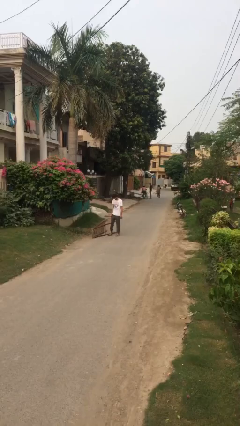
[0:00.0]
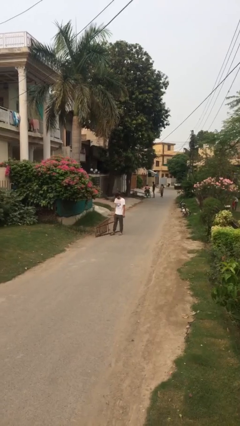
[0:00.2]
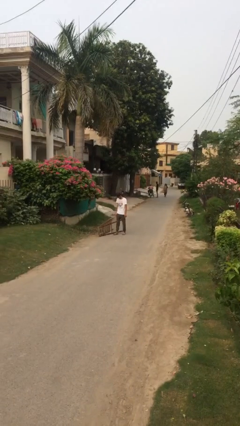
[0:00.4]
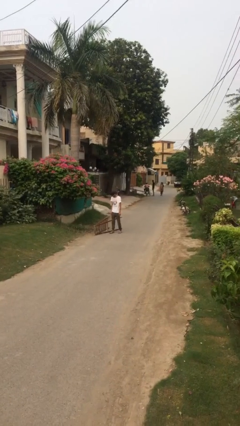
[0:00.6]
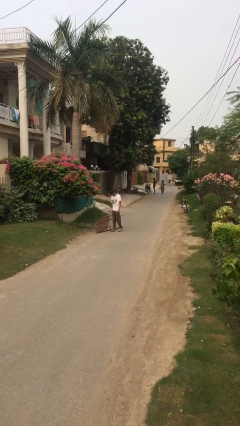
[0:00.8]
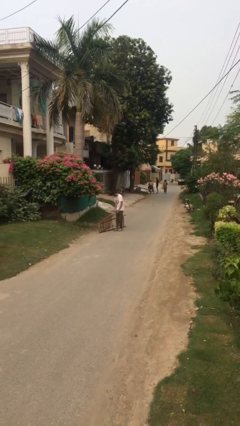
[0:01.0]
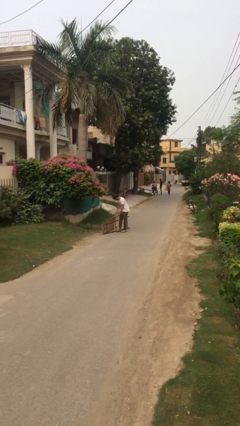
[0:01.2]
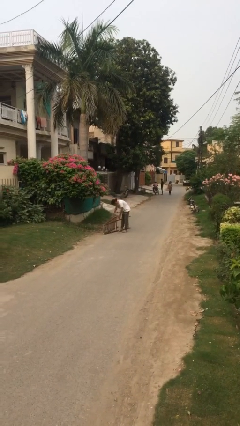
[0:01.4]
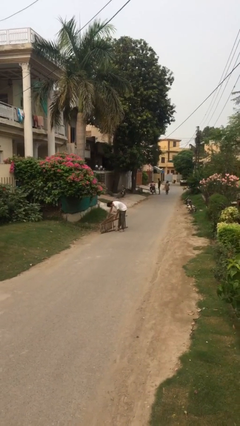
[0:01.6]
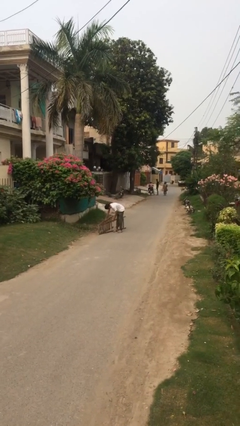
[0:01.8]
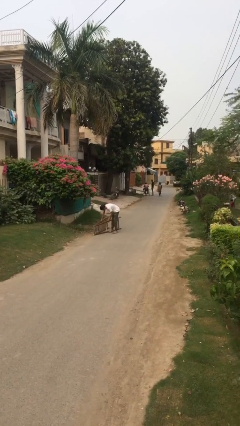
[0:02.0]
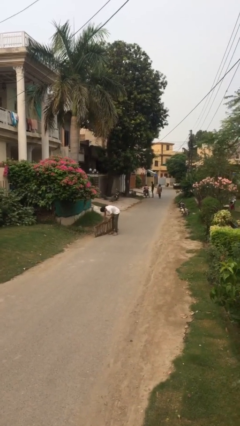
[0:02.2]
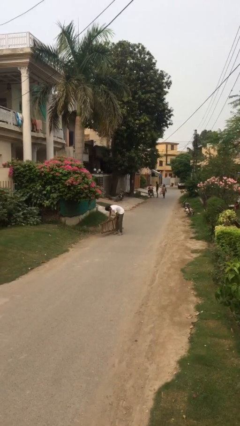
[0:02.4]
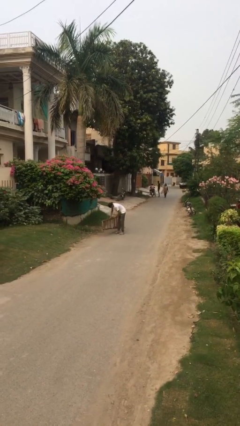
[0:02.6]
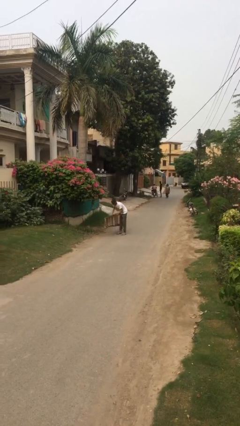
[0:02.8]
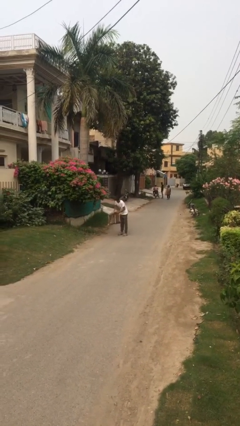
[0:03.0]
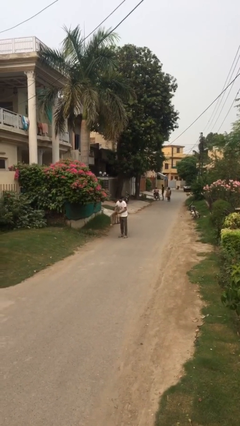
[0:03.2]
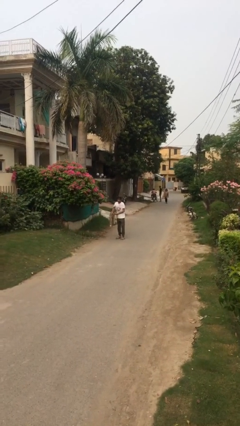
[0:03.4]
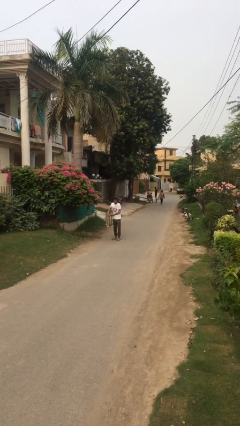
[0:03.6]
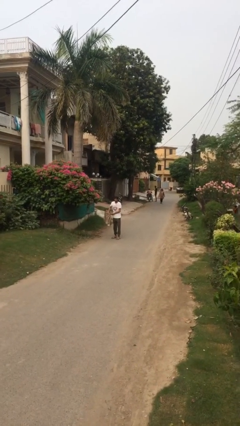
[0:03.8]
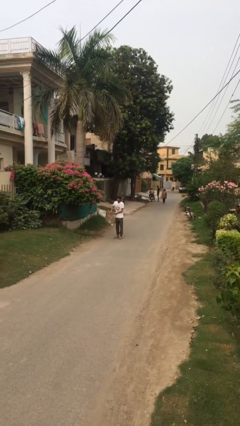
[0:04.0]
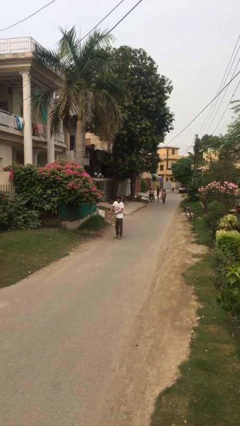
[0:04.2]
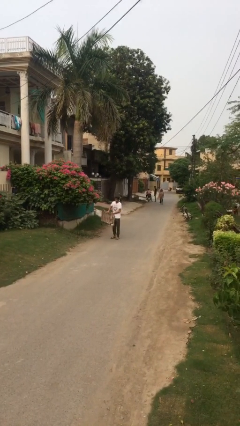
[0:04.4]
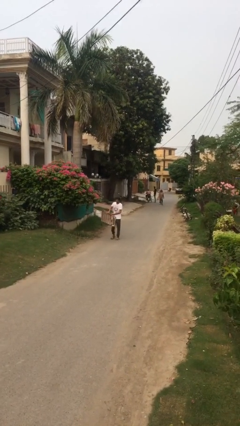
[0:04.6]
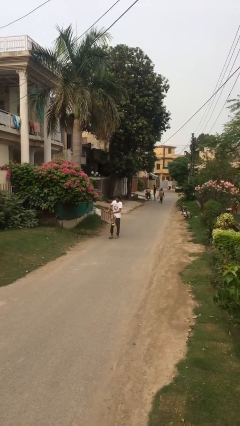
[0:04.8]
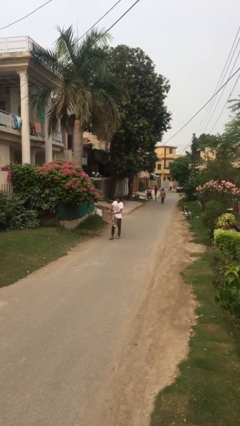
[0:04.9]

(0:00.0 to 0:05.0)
person carries heavy object

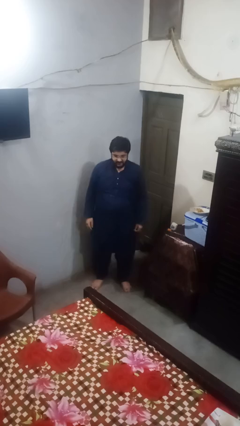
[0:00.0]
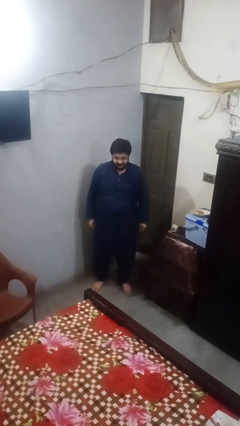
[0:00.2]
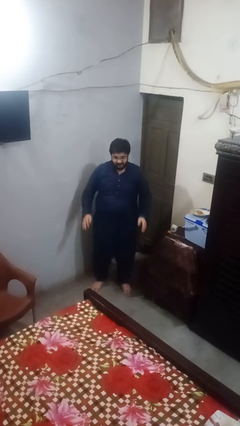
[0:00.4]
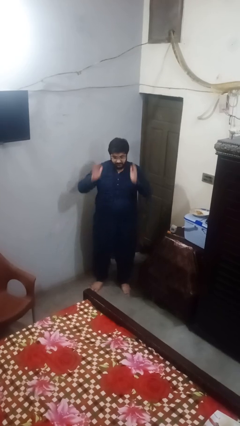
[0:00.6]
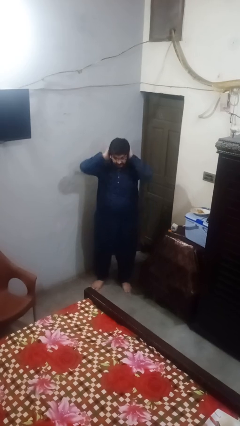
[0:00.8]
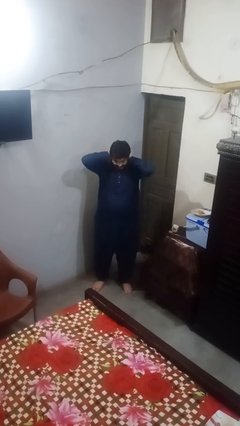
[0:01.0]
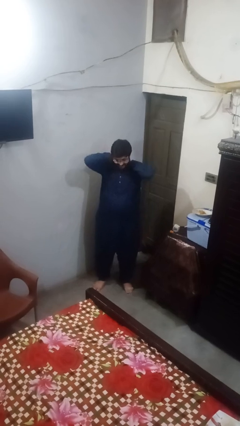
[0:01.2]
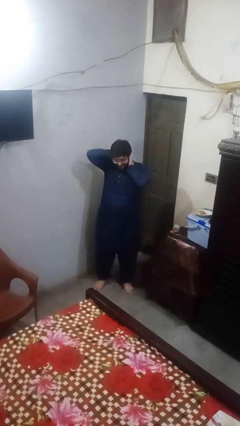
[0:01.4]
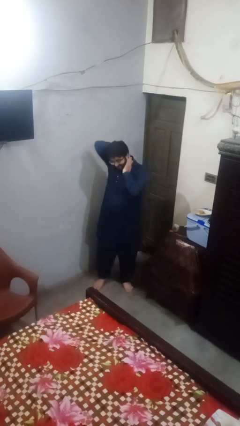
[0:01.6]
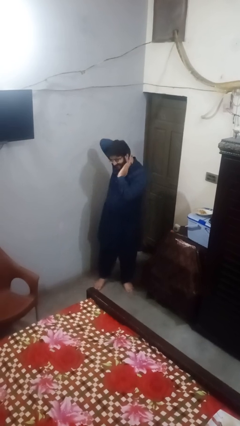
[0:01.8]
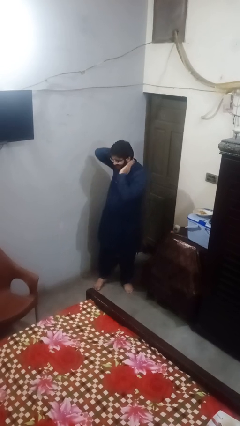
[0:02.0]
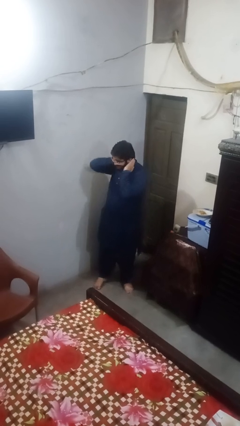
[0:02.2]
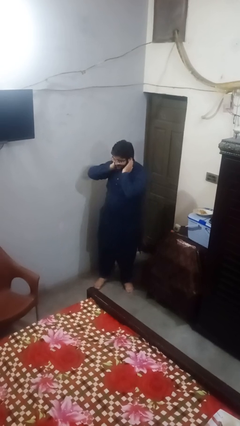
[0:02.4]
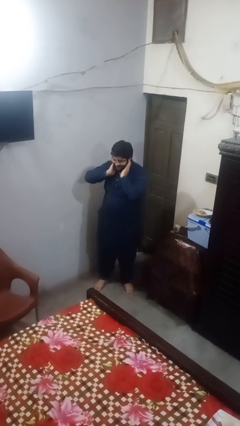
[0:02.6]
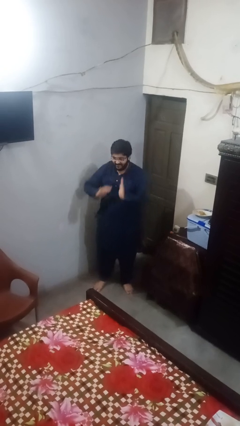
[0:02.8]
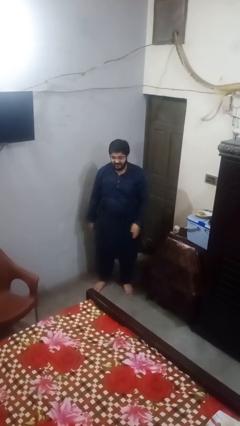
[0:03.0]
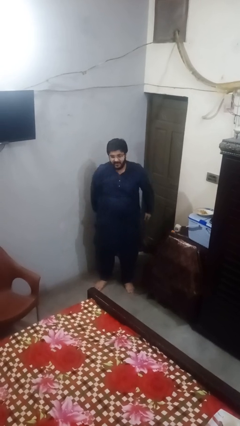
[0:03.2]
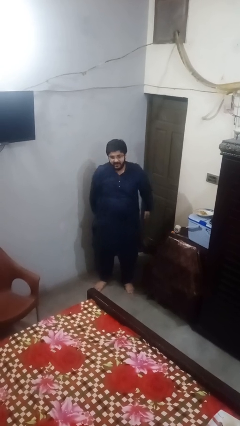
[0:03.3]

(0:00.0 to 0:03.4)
person rubs neck

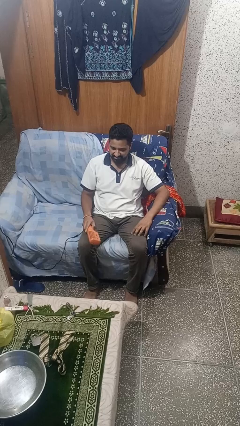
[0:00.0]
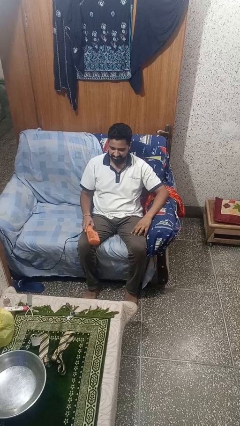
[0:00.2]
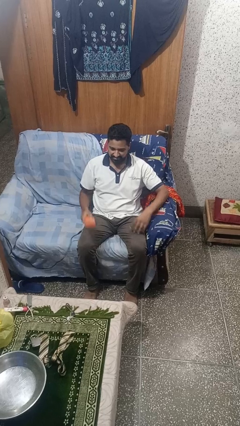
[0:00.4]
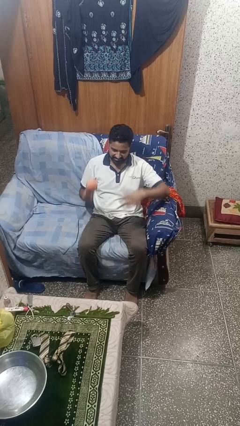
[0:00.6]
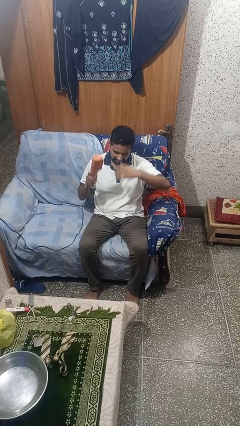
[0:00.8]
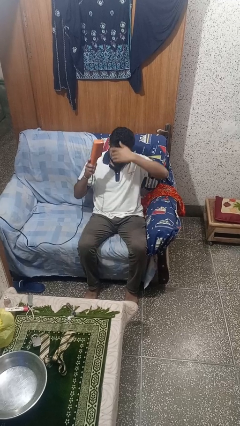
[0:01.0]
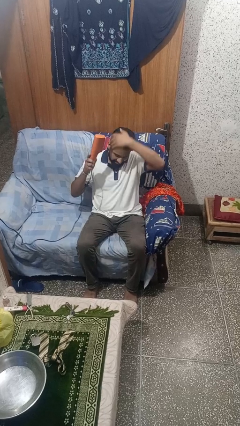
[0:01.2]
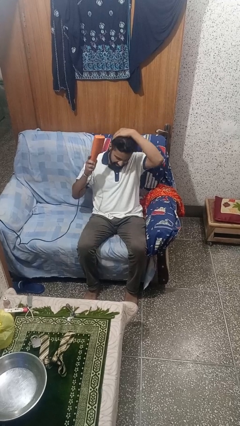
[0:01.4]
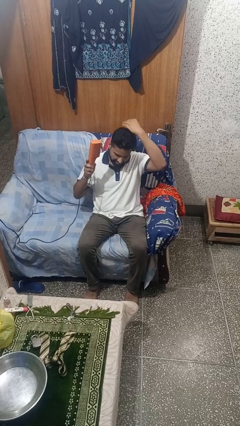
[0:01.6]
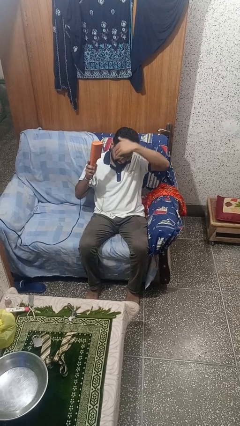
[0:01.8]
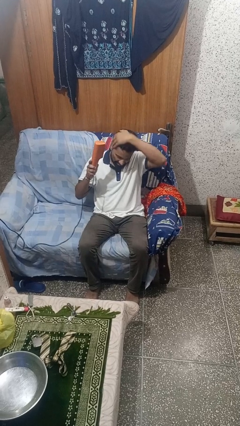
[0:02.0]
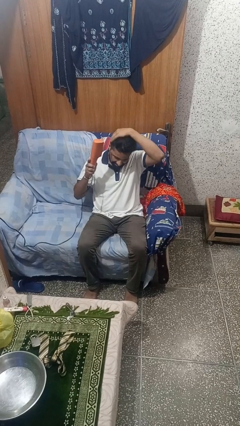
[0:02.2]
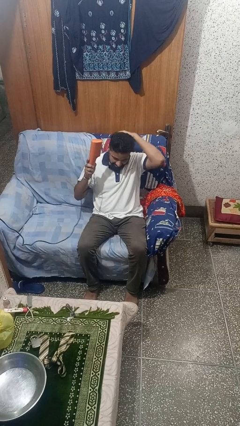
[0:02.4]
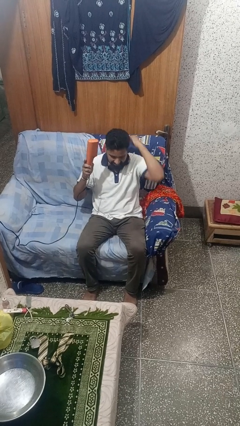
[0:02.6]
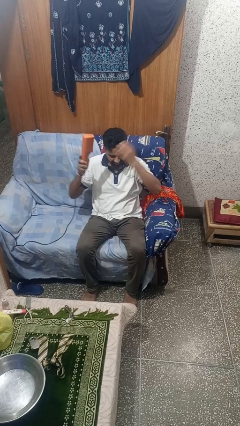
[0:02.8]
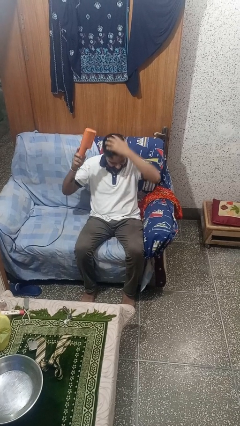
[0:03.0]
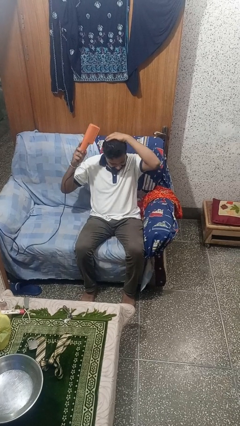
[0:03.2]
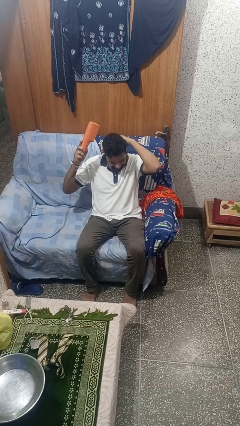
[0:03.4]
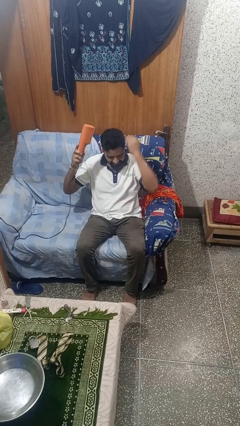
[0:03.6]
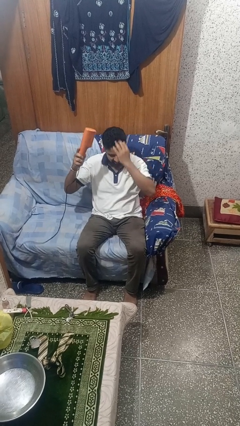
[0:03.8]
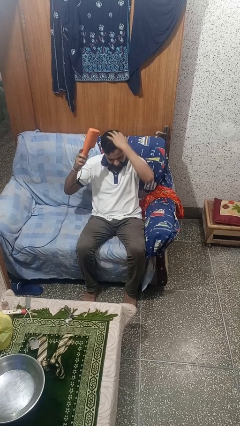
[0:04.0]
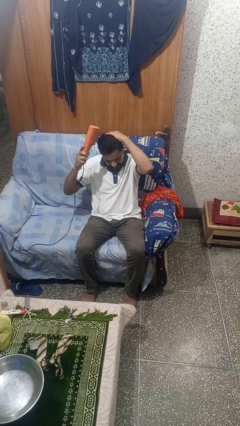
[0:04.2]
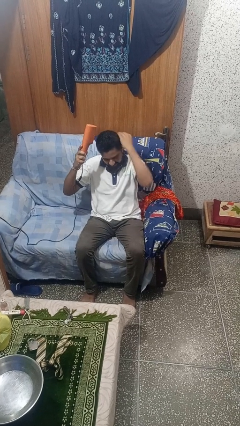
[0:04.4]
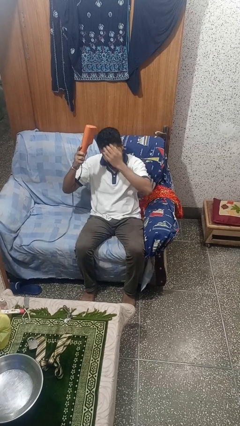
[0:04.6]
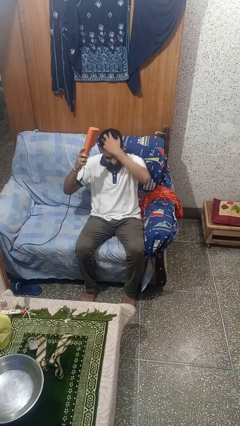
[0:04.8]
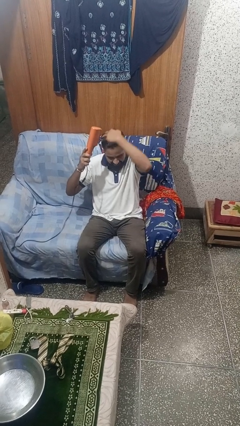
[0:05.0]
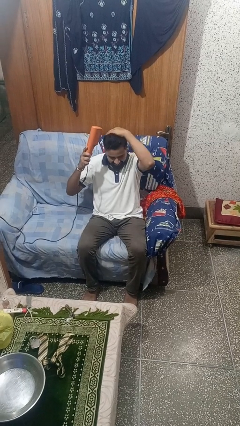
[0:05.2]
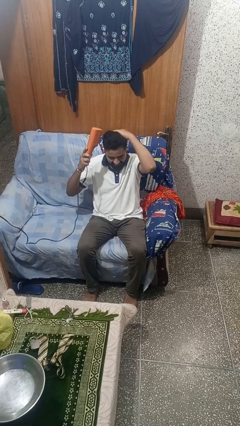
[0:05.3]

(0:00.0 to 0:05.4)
person dries hair with hairdryer

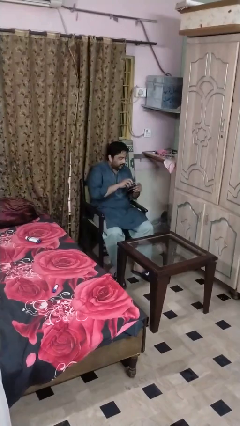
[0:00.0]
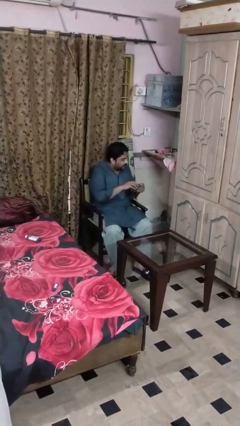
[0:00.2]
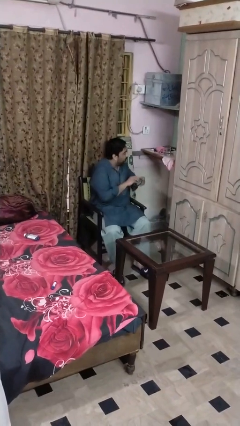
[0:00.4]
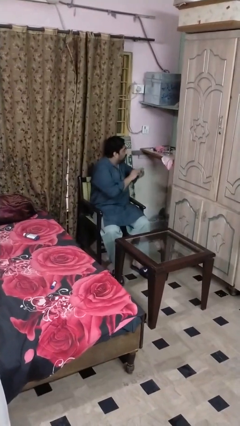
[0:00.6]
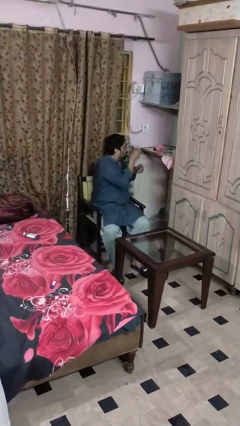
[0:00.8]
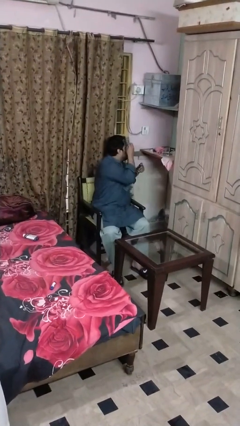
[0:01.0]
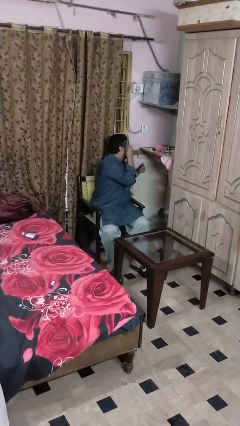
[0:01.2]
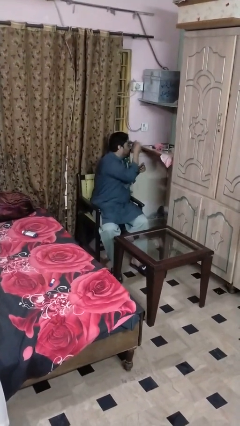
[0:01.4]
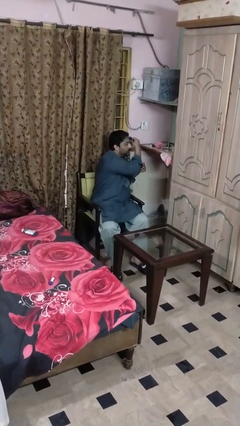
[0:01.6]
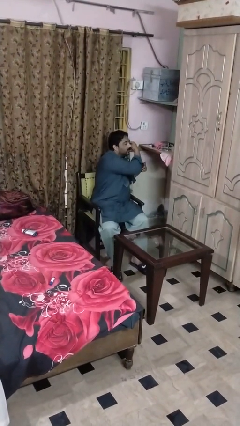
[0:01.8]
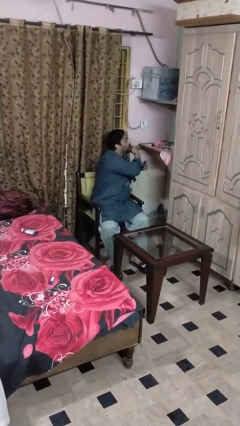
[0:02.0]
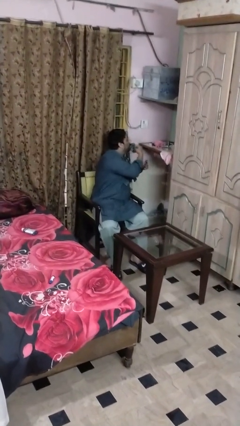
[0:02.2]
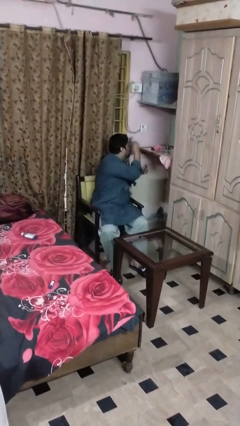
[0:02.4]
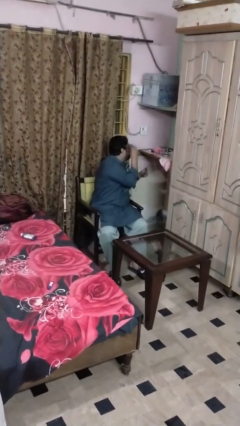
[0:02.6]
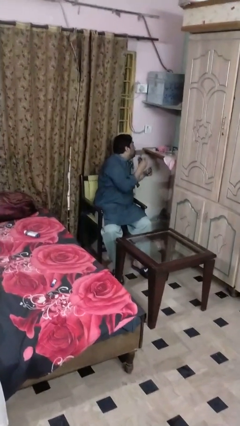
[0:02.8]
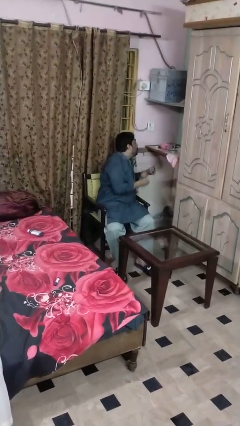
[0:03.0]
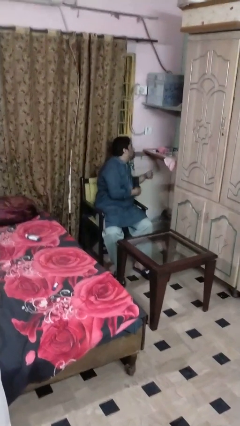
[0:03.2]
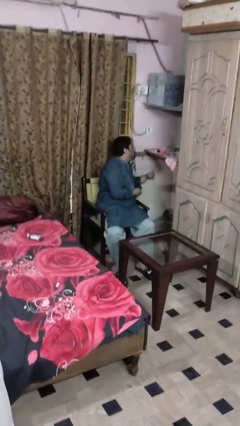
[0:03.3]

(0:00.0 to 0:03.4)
person applies foundation makeup

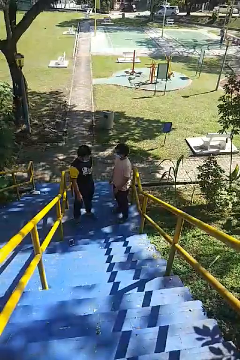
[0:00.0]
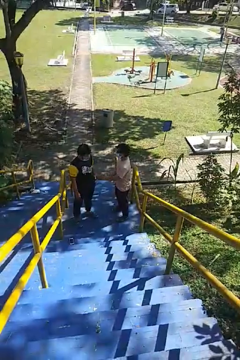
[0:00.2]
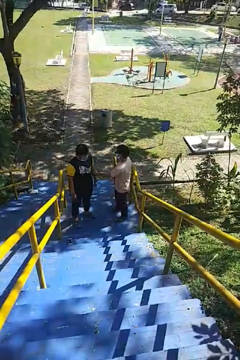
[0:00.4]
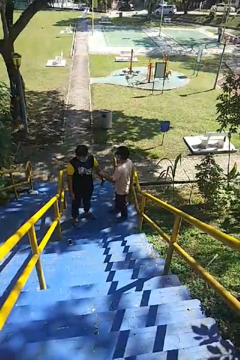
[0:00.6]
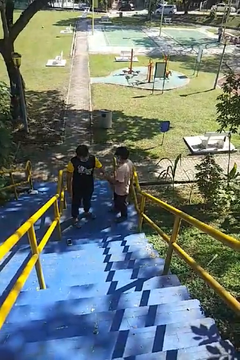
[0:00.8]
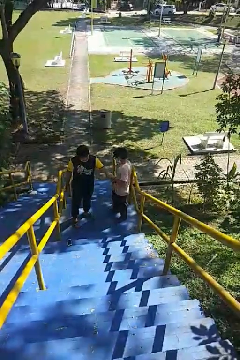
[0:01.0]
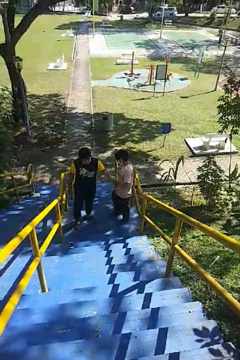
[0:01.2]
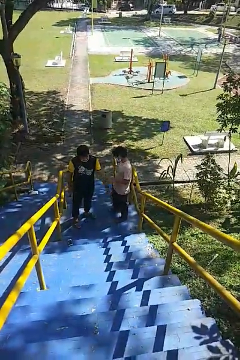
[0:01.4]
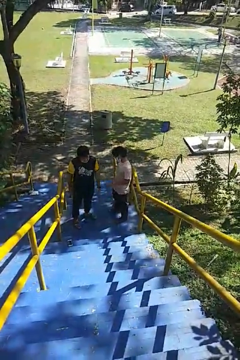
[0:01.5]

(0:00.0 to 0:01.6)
person grabs person by forearm
